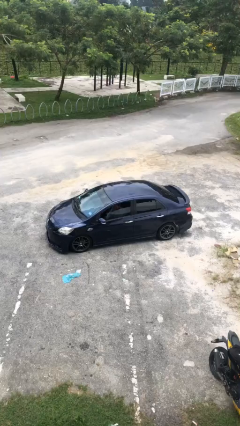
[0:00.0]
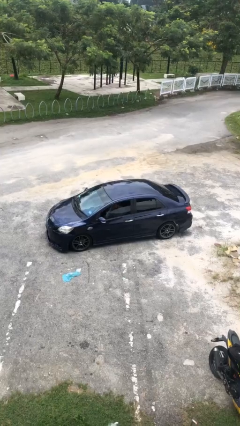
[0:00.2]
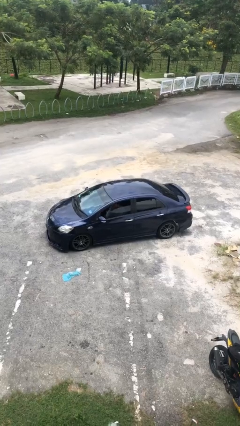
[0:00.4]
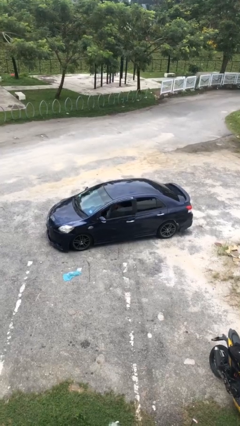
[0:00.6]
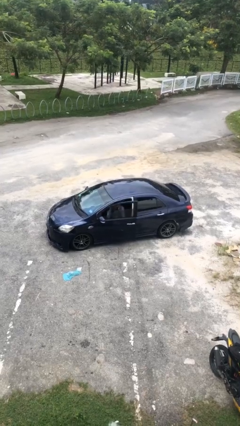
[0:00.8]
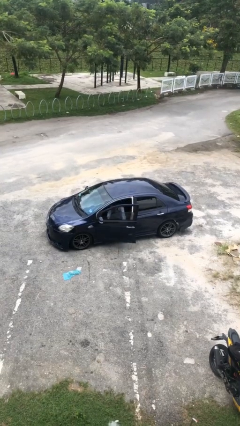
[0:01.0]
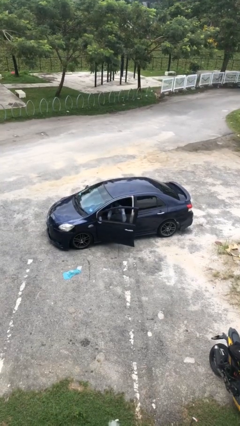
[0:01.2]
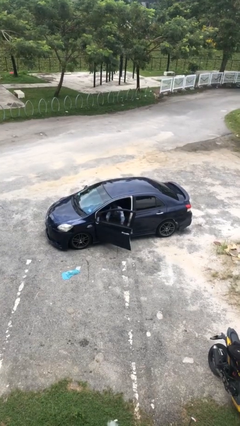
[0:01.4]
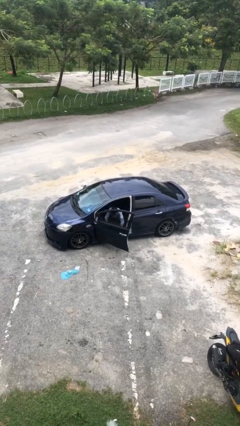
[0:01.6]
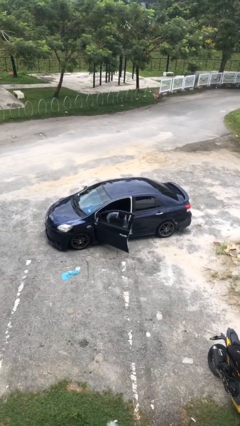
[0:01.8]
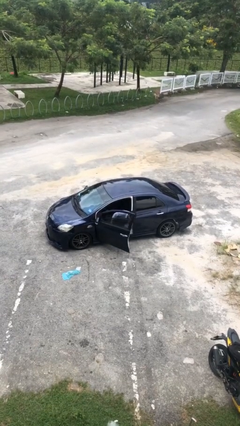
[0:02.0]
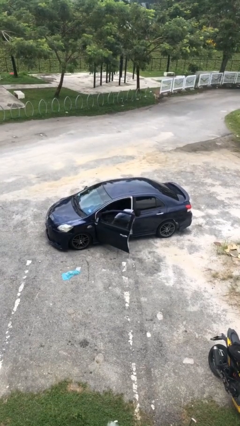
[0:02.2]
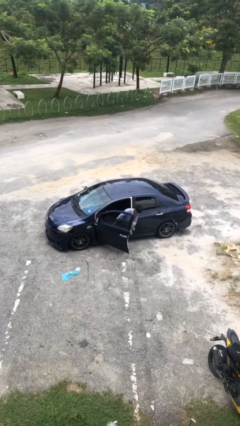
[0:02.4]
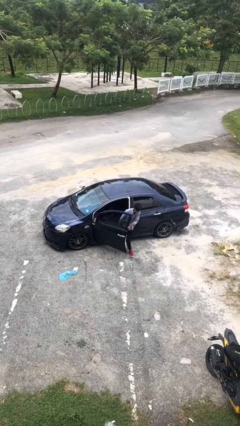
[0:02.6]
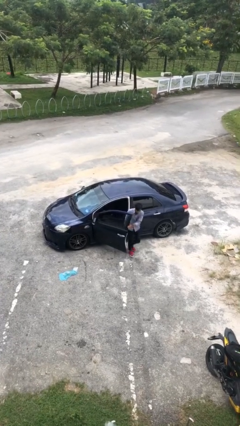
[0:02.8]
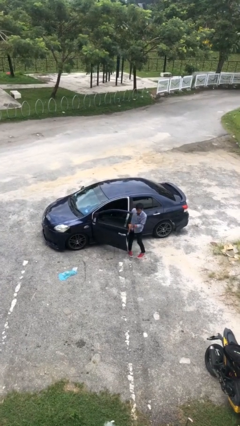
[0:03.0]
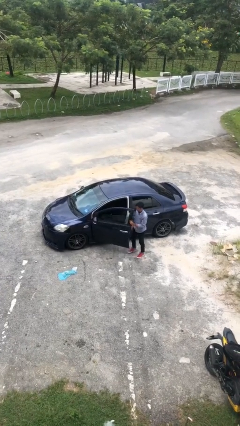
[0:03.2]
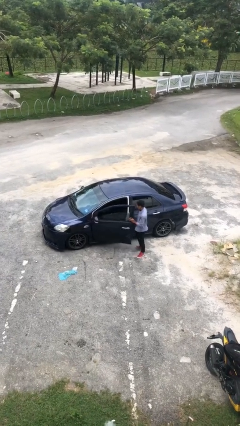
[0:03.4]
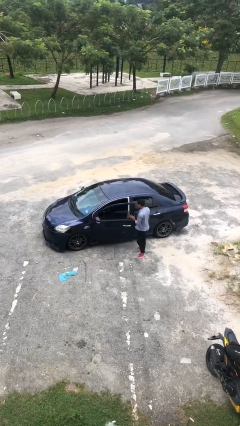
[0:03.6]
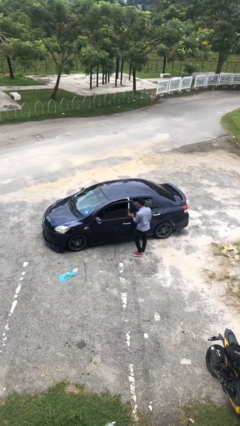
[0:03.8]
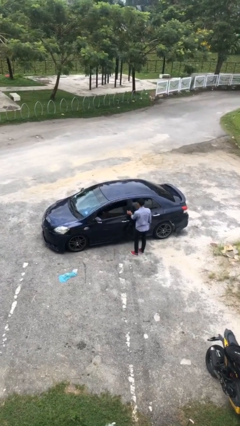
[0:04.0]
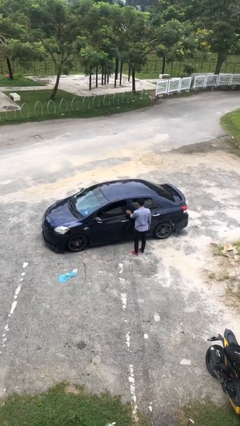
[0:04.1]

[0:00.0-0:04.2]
car drops off person

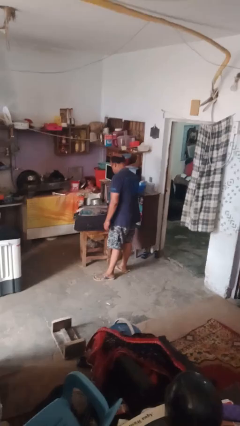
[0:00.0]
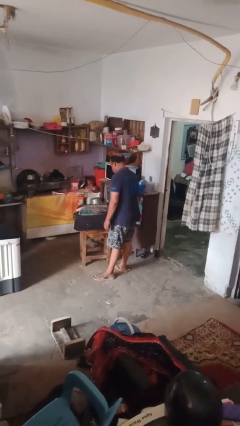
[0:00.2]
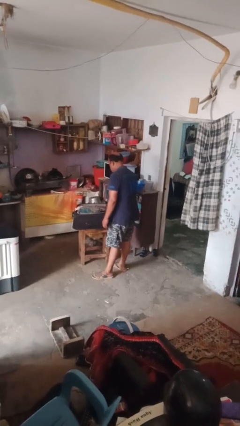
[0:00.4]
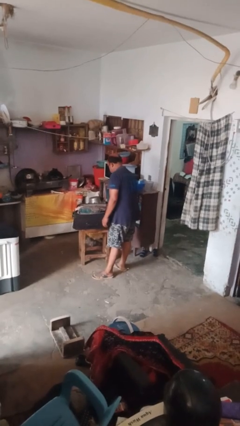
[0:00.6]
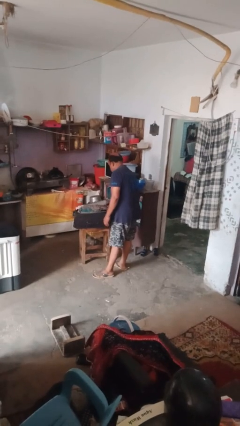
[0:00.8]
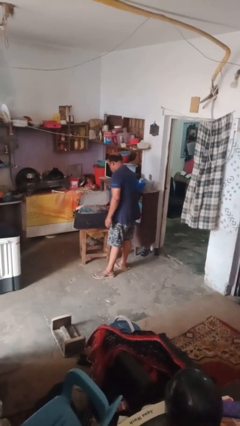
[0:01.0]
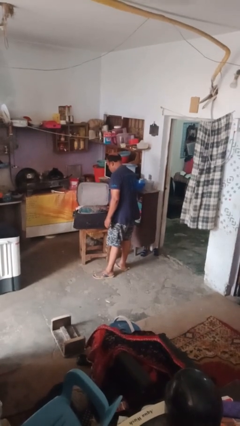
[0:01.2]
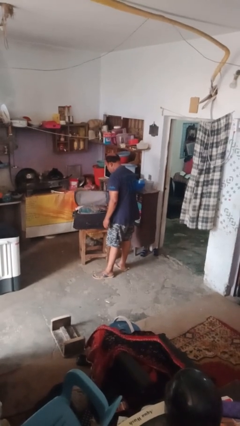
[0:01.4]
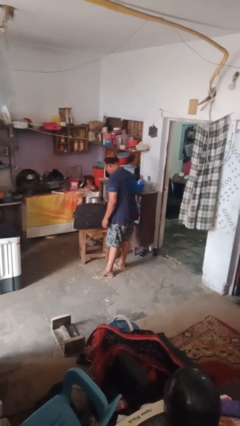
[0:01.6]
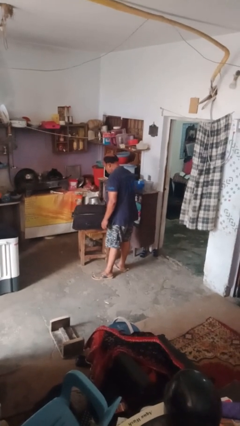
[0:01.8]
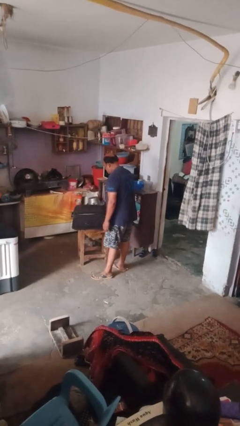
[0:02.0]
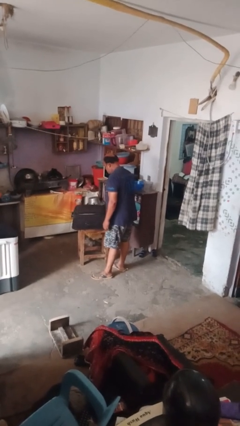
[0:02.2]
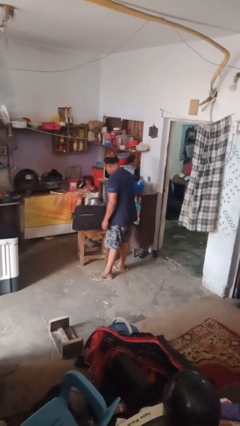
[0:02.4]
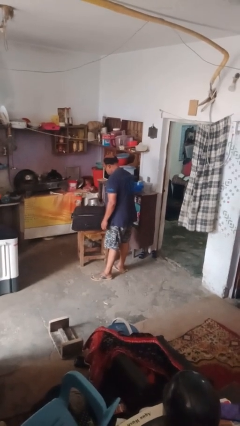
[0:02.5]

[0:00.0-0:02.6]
person closes suitcase

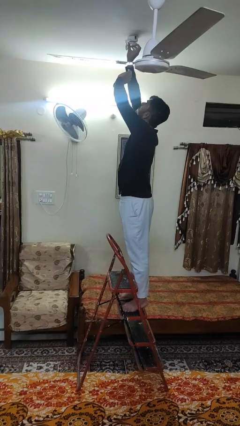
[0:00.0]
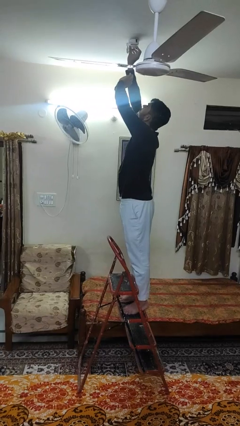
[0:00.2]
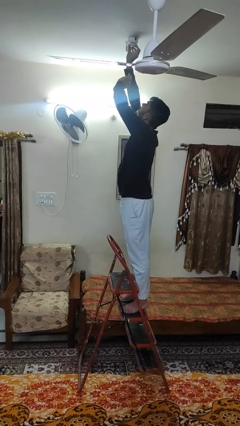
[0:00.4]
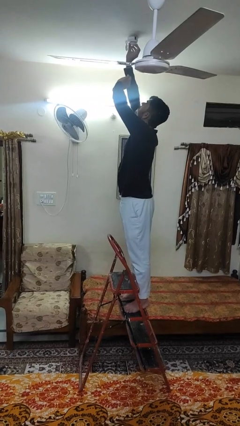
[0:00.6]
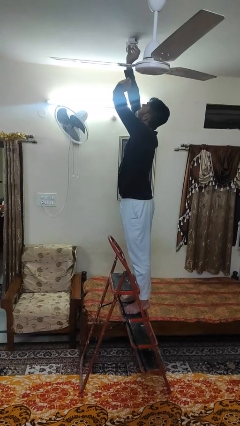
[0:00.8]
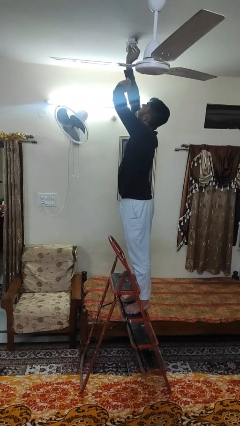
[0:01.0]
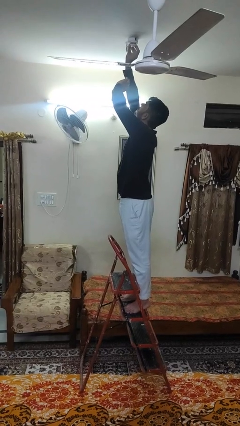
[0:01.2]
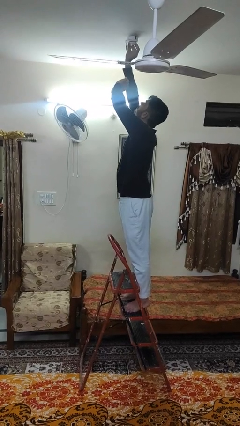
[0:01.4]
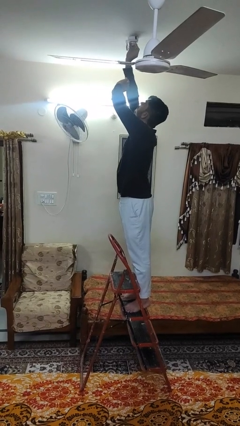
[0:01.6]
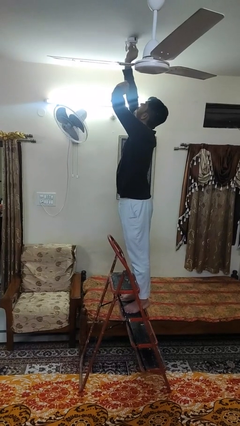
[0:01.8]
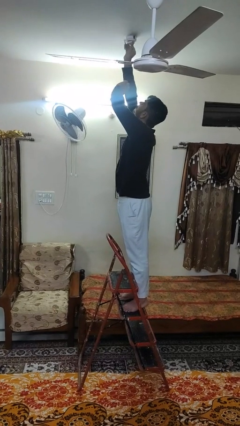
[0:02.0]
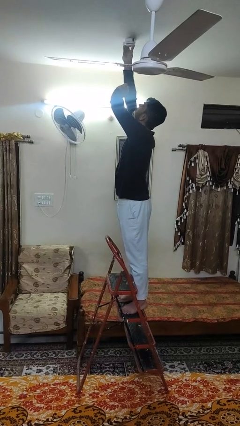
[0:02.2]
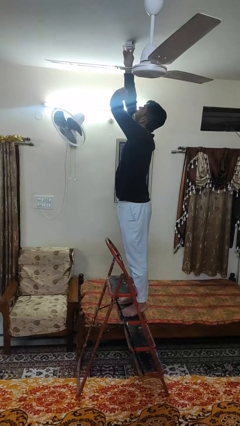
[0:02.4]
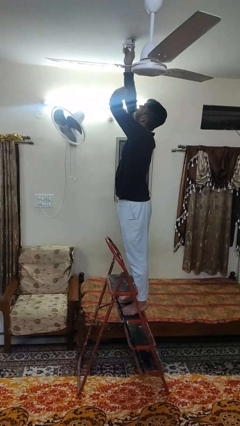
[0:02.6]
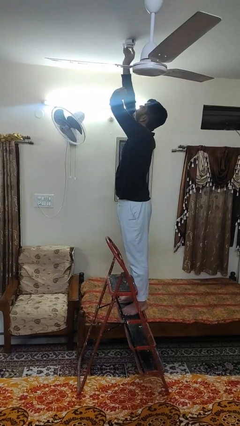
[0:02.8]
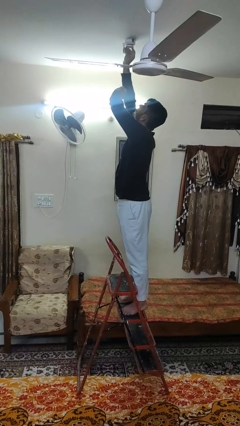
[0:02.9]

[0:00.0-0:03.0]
person puts up smoke detector

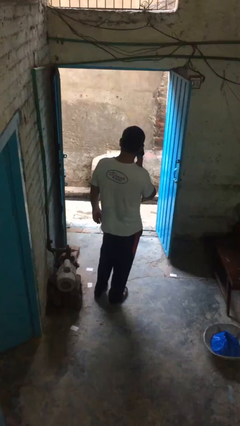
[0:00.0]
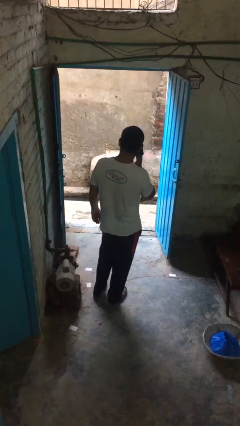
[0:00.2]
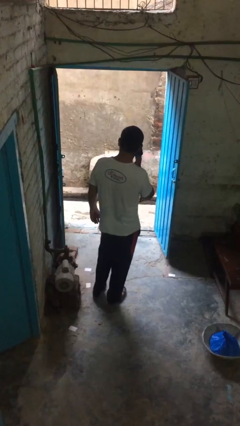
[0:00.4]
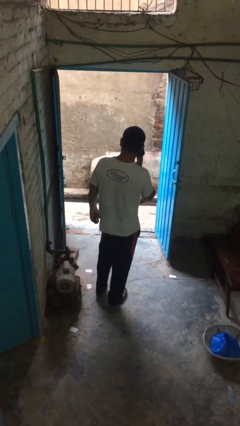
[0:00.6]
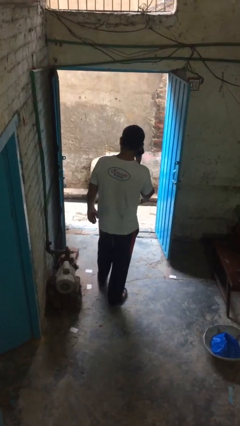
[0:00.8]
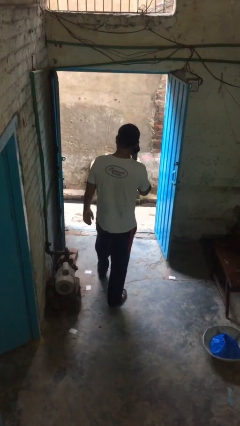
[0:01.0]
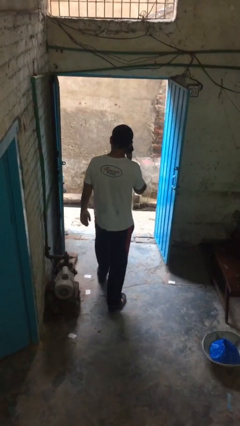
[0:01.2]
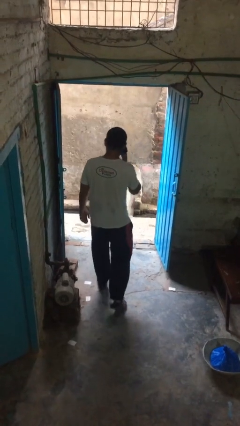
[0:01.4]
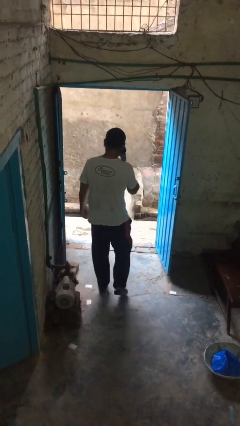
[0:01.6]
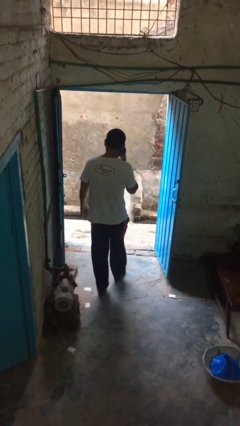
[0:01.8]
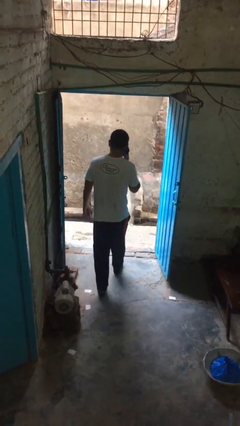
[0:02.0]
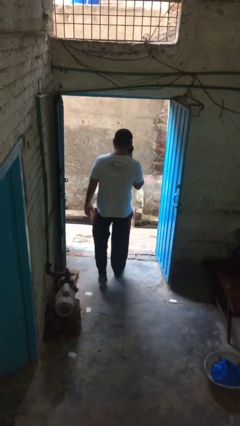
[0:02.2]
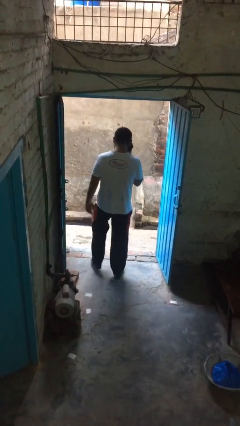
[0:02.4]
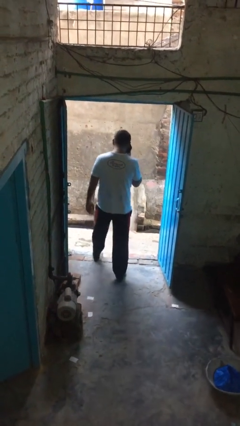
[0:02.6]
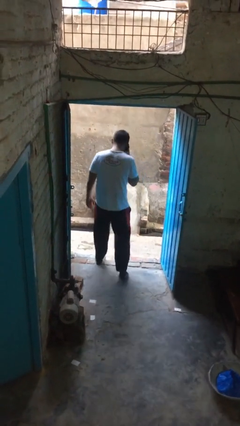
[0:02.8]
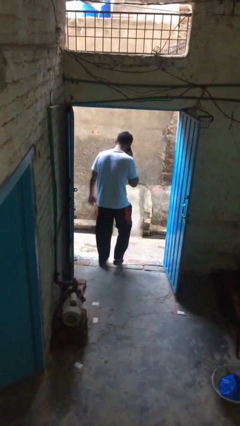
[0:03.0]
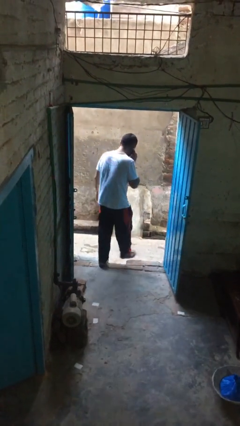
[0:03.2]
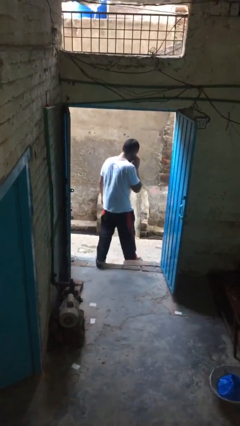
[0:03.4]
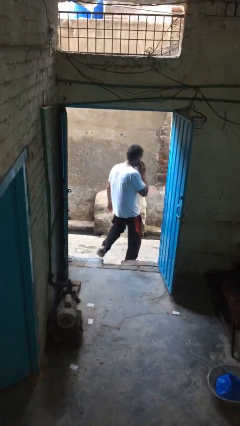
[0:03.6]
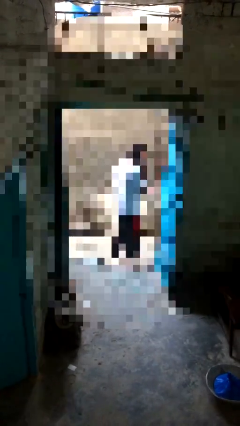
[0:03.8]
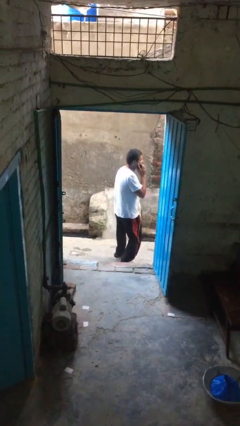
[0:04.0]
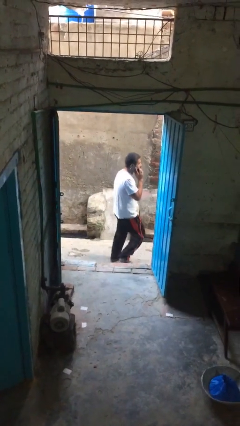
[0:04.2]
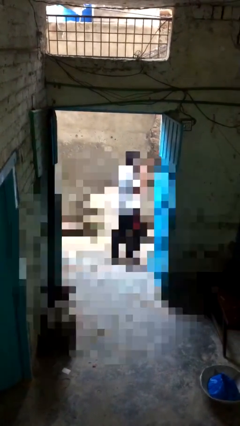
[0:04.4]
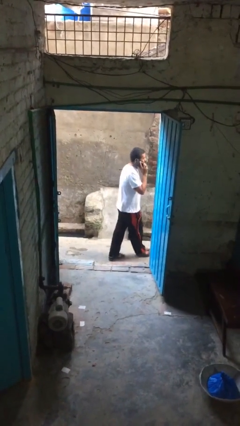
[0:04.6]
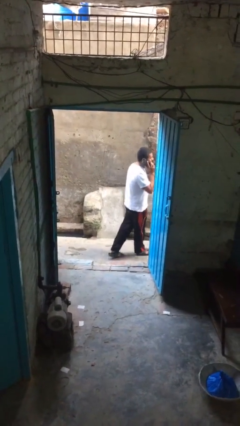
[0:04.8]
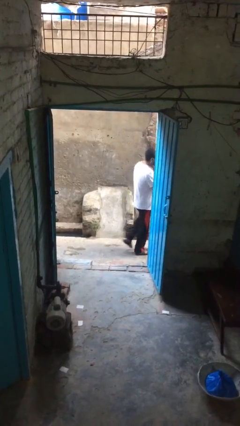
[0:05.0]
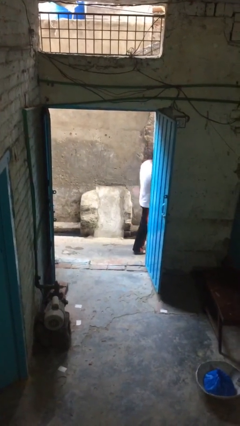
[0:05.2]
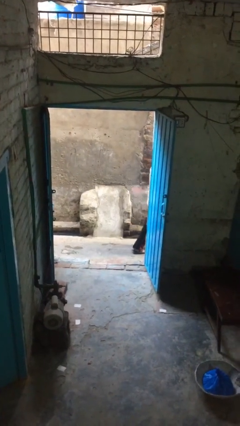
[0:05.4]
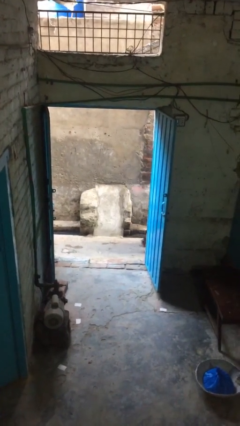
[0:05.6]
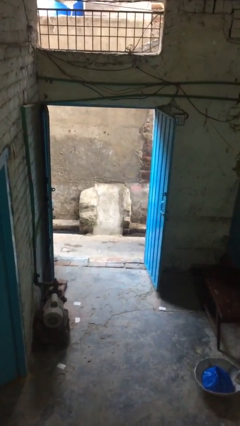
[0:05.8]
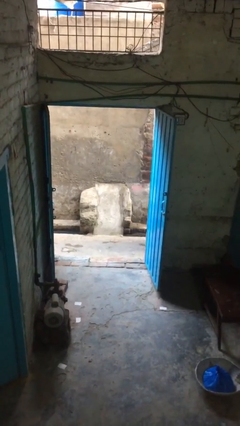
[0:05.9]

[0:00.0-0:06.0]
person exits scene through structure

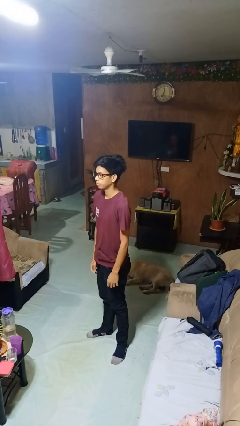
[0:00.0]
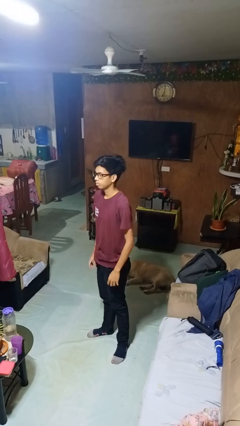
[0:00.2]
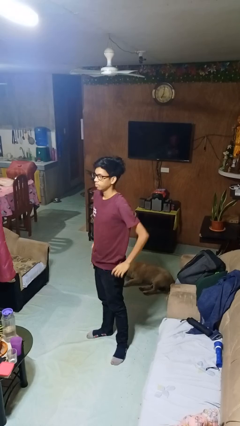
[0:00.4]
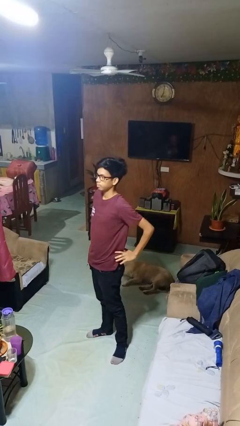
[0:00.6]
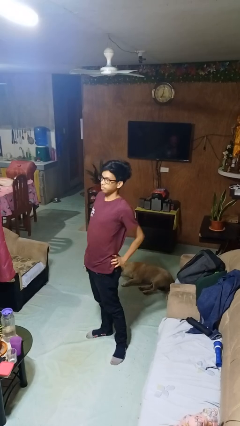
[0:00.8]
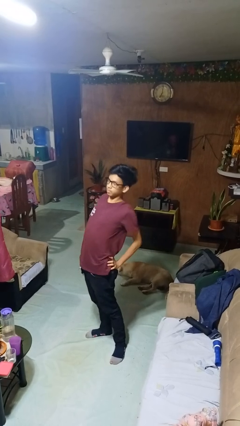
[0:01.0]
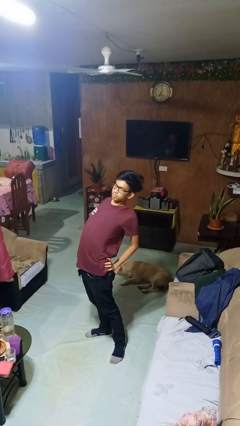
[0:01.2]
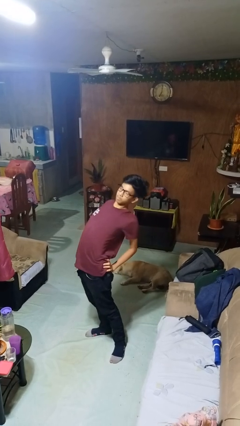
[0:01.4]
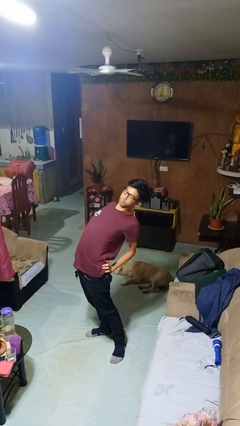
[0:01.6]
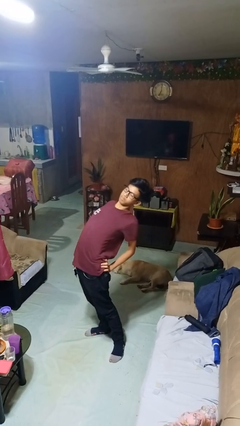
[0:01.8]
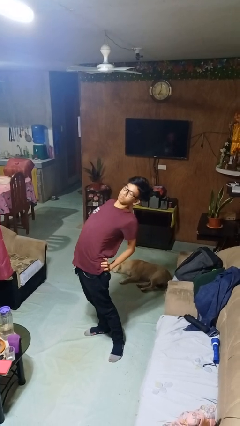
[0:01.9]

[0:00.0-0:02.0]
person stretches back

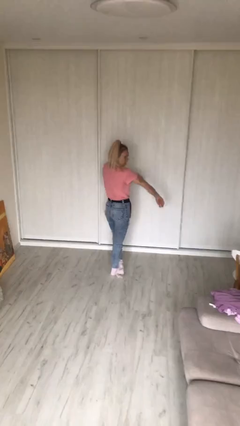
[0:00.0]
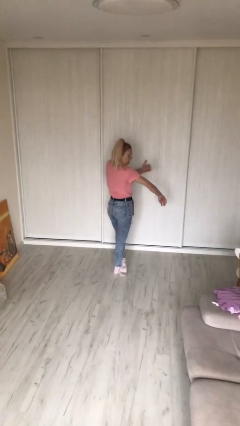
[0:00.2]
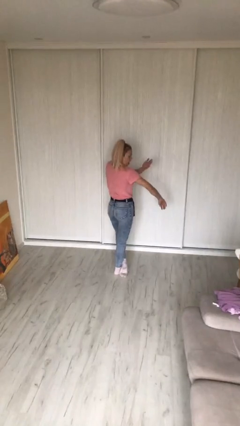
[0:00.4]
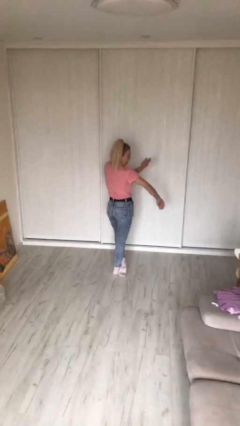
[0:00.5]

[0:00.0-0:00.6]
person swats bug
